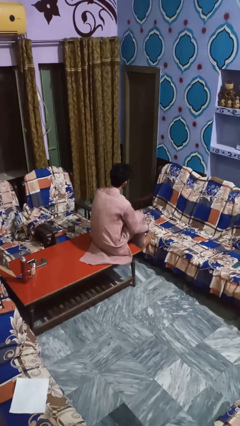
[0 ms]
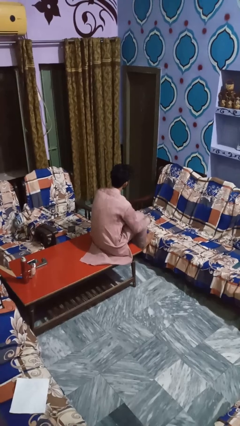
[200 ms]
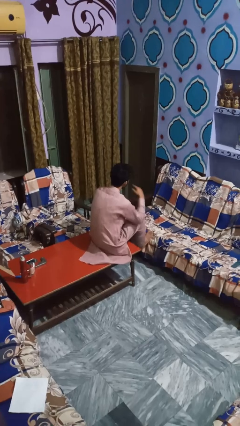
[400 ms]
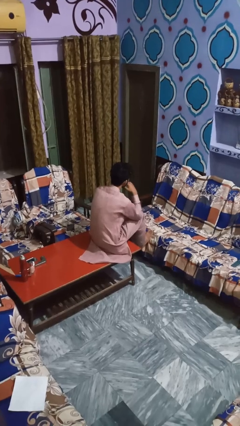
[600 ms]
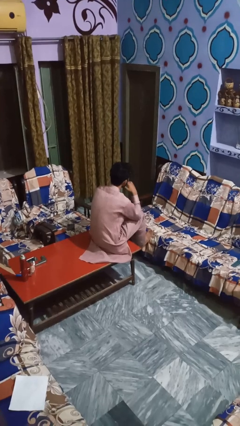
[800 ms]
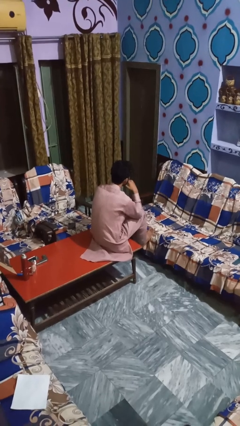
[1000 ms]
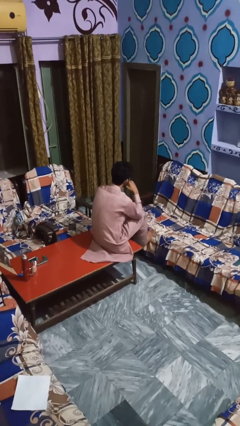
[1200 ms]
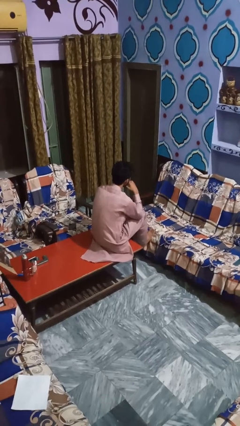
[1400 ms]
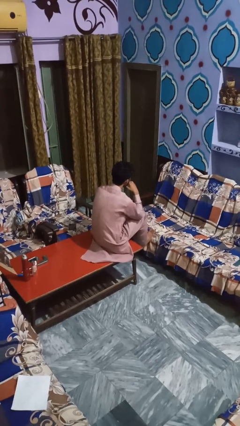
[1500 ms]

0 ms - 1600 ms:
person licks fingers

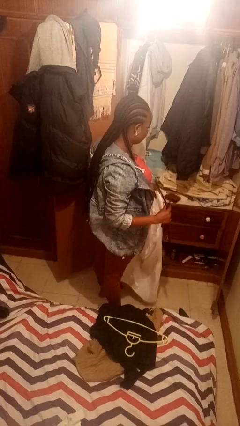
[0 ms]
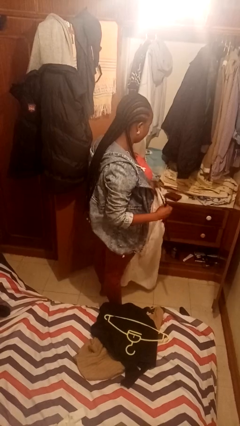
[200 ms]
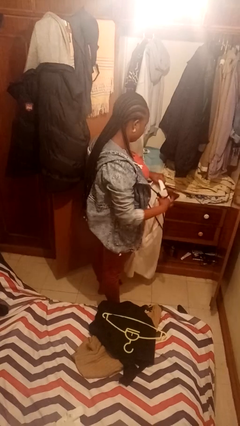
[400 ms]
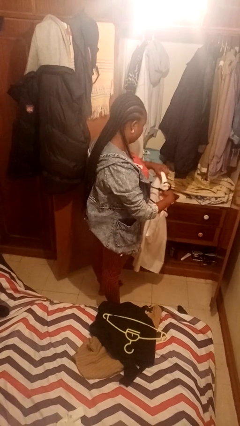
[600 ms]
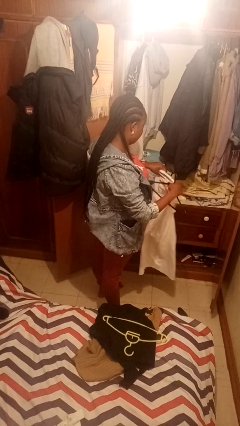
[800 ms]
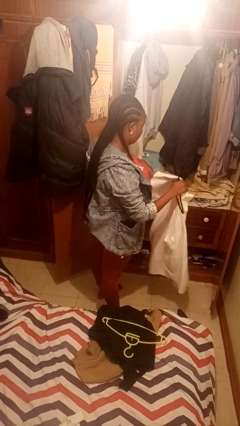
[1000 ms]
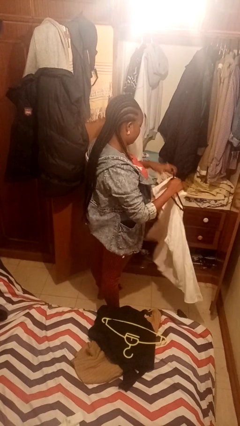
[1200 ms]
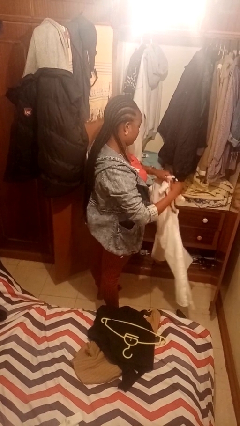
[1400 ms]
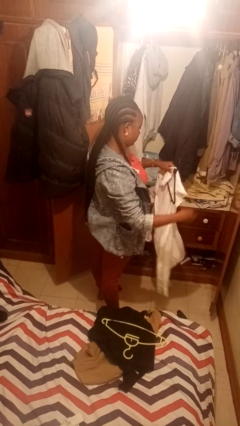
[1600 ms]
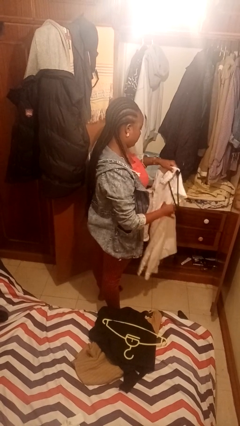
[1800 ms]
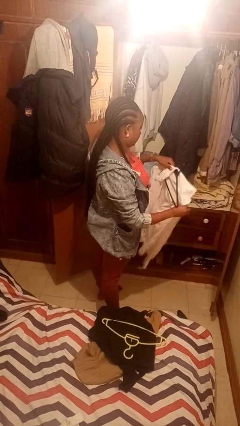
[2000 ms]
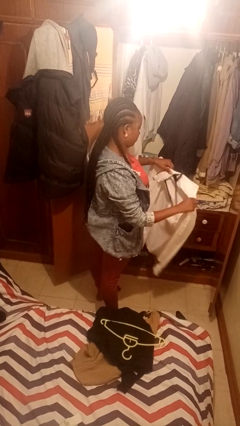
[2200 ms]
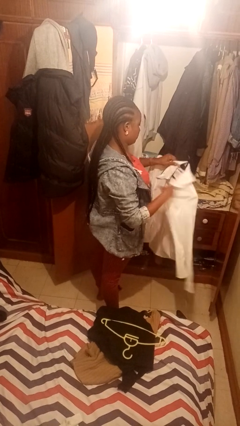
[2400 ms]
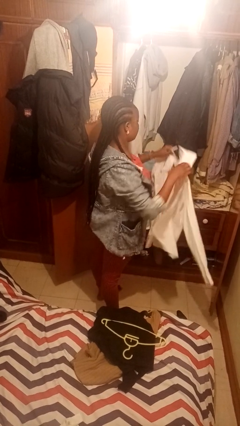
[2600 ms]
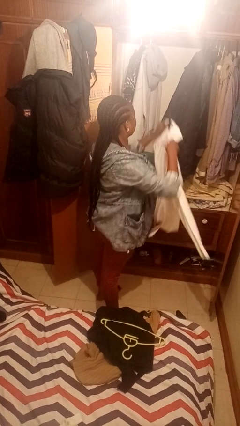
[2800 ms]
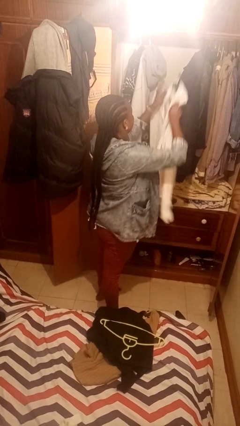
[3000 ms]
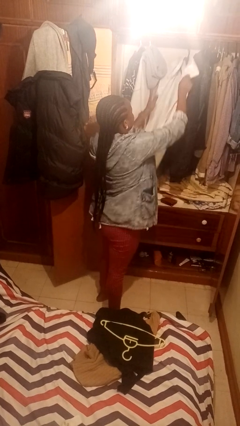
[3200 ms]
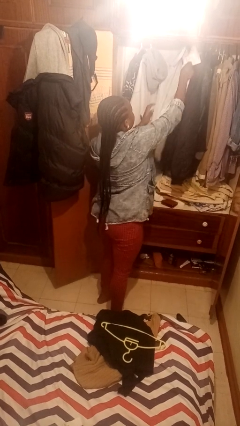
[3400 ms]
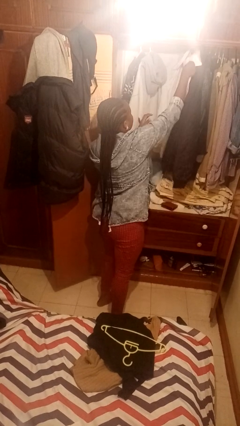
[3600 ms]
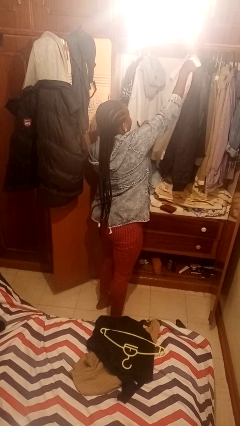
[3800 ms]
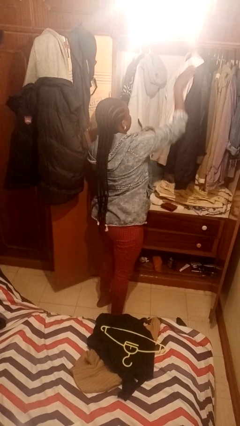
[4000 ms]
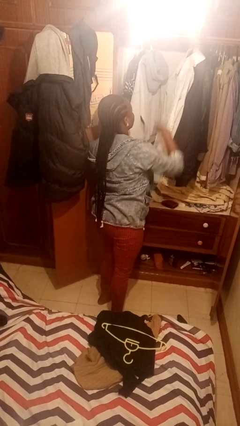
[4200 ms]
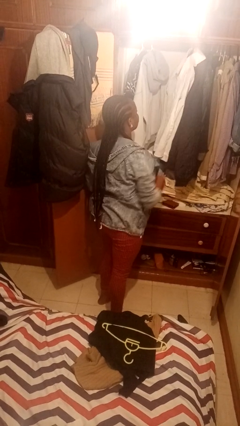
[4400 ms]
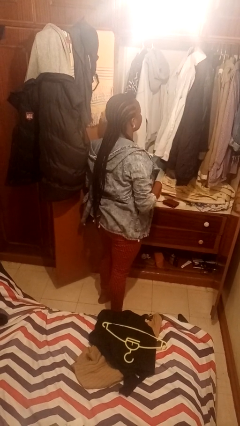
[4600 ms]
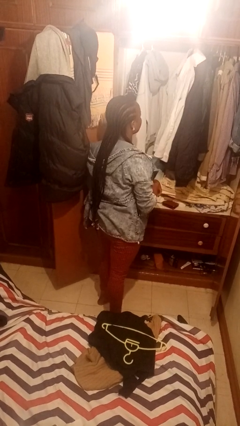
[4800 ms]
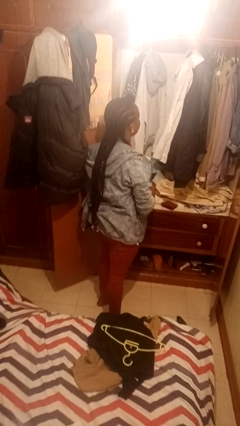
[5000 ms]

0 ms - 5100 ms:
person puts clothes into closet

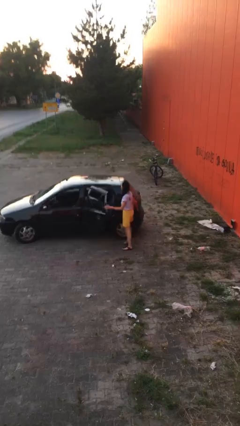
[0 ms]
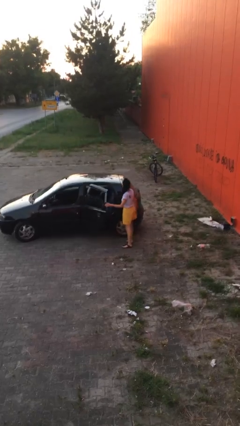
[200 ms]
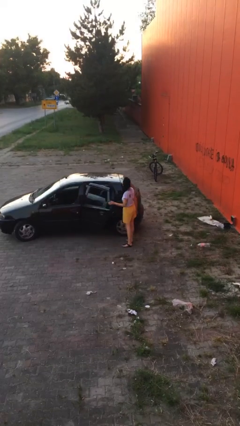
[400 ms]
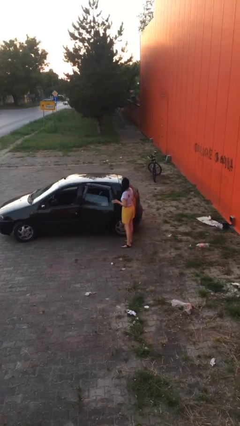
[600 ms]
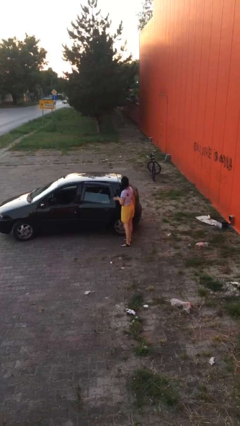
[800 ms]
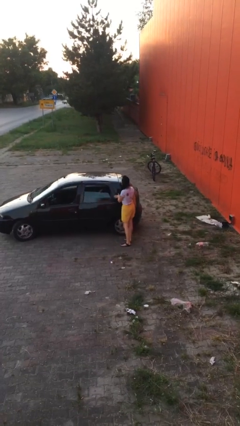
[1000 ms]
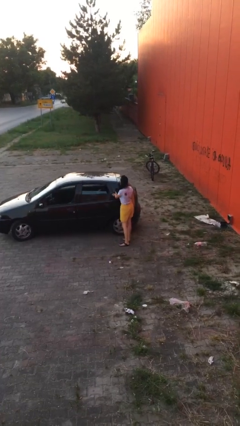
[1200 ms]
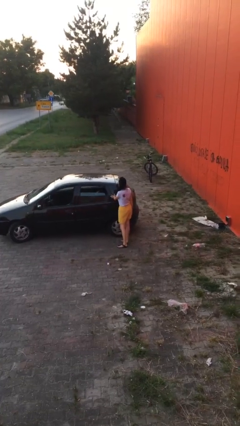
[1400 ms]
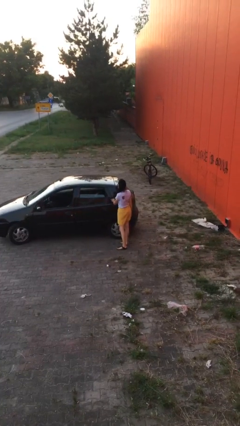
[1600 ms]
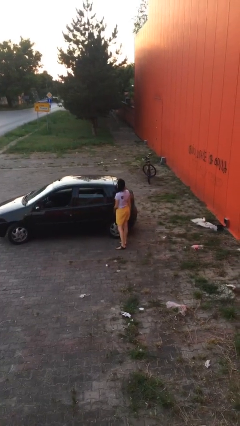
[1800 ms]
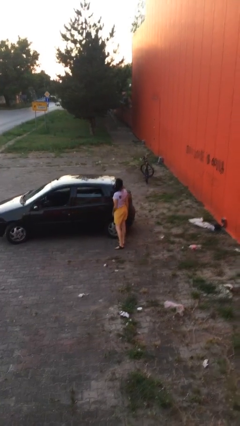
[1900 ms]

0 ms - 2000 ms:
person closes car door

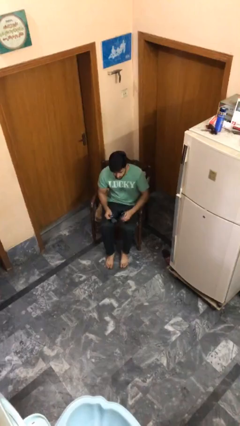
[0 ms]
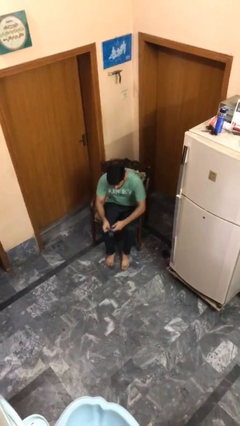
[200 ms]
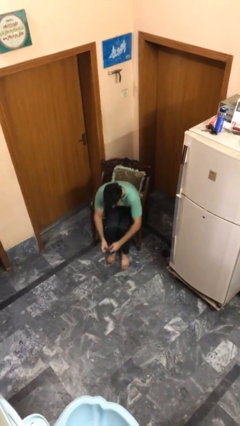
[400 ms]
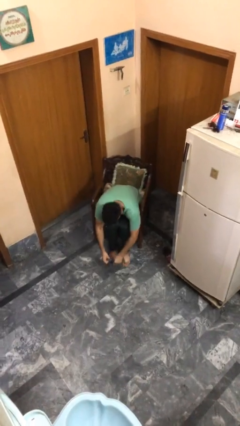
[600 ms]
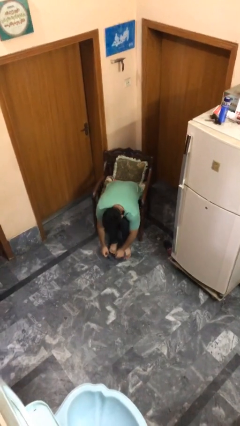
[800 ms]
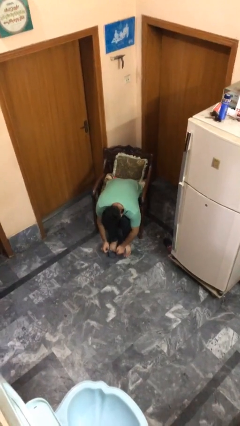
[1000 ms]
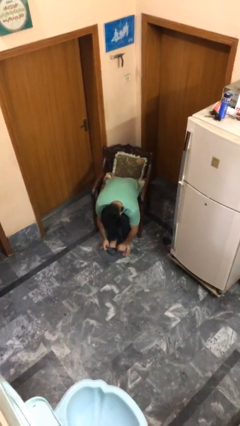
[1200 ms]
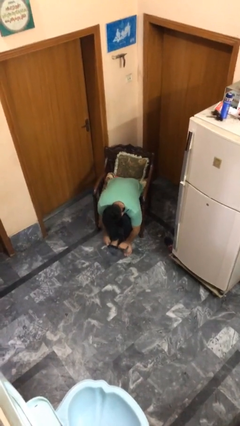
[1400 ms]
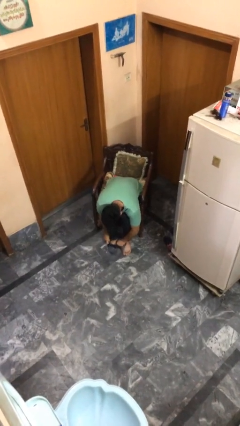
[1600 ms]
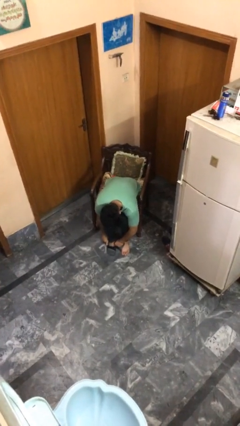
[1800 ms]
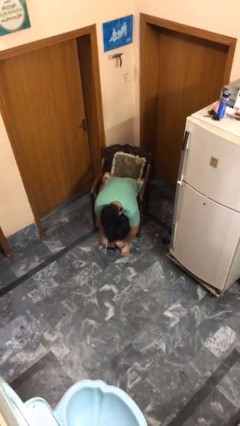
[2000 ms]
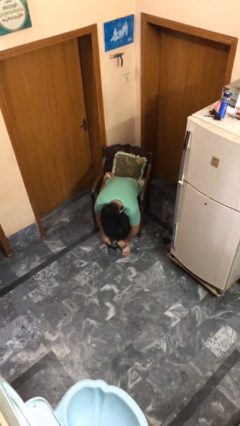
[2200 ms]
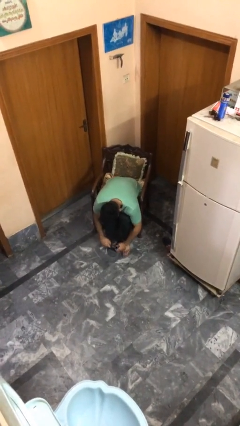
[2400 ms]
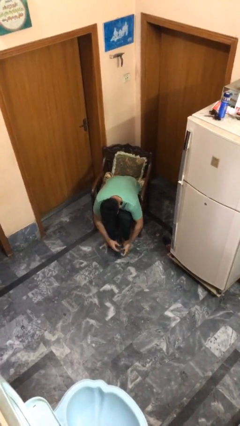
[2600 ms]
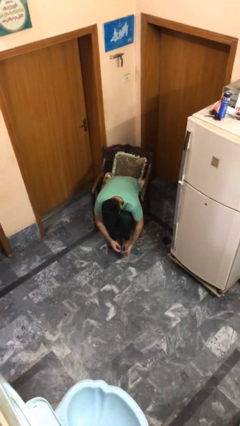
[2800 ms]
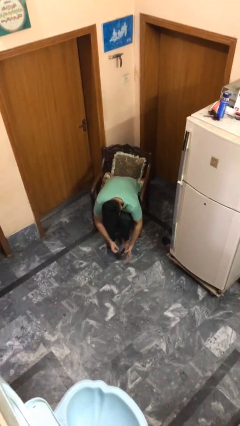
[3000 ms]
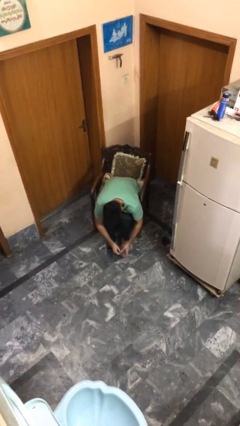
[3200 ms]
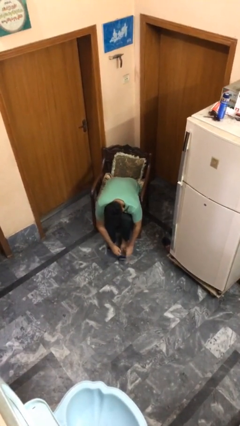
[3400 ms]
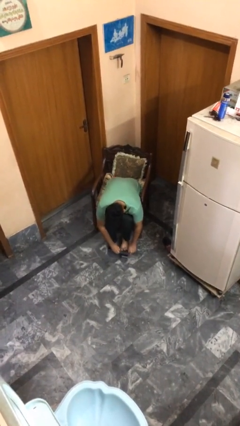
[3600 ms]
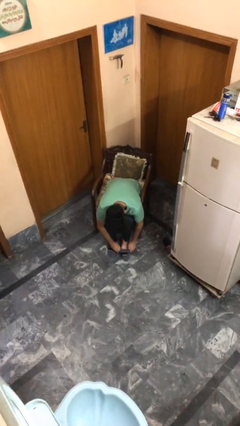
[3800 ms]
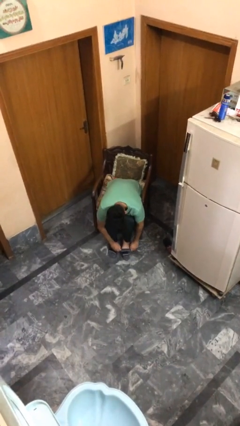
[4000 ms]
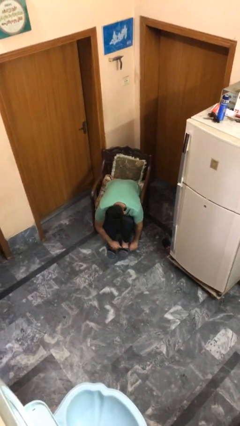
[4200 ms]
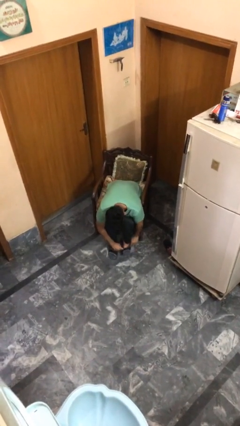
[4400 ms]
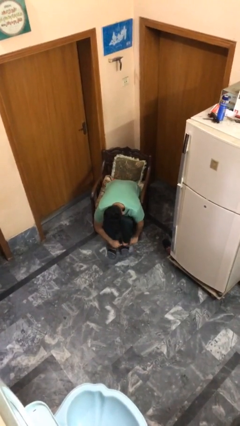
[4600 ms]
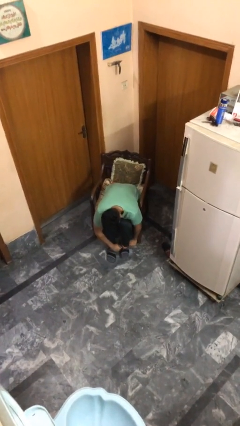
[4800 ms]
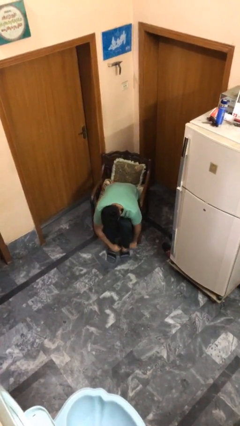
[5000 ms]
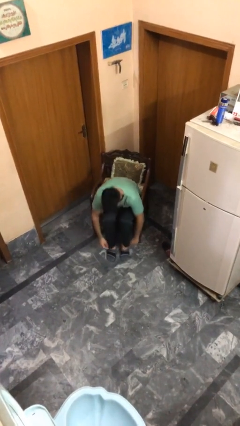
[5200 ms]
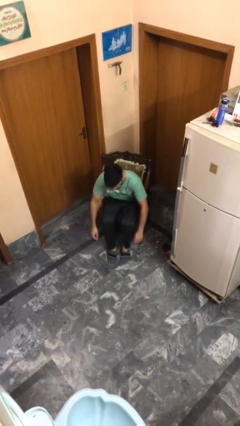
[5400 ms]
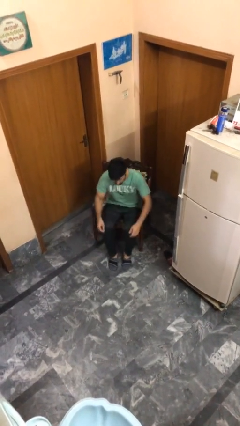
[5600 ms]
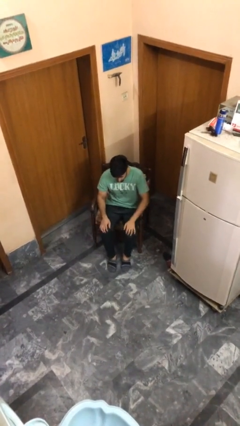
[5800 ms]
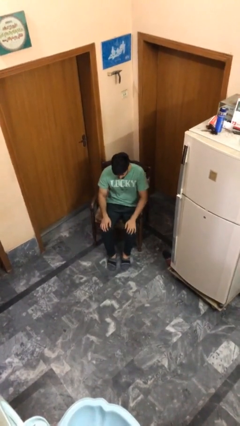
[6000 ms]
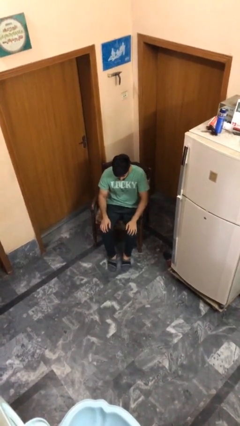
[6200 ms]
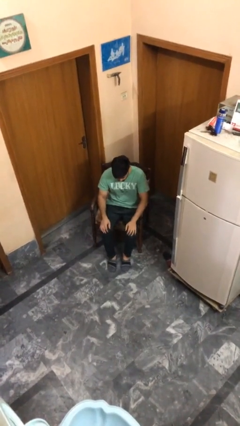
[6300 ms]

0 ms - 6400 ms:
person puts on socks

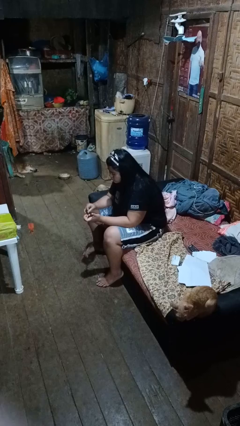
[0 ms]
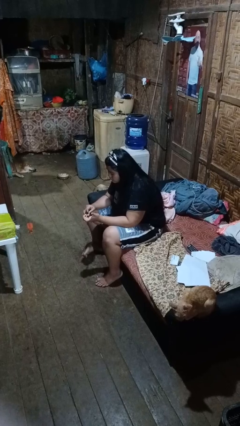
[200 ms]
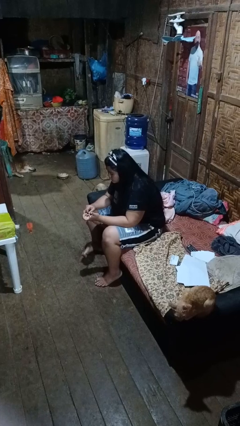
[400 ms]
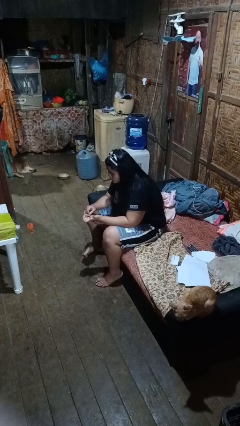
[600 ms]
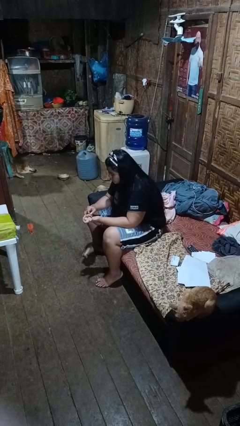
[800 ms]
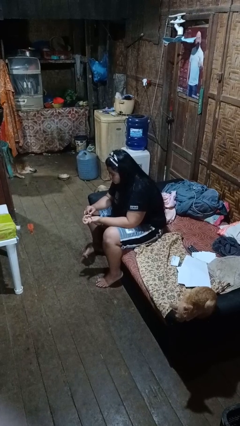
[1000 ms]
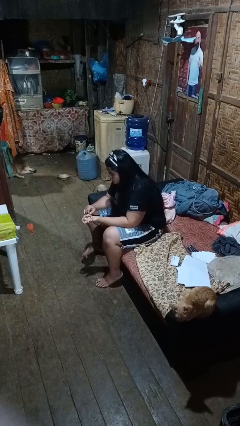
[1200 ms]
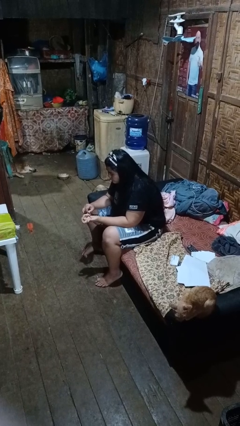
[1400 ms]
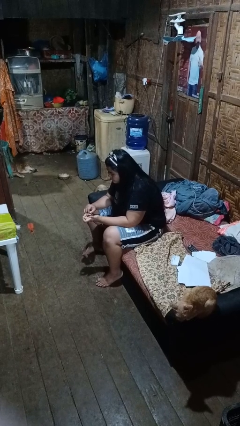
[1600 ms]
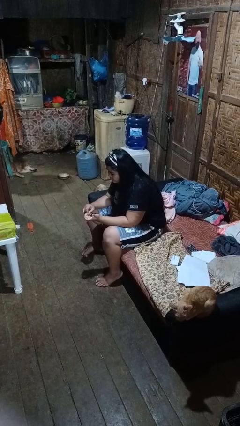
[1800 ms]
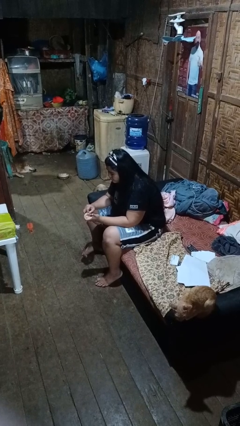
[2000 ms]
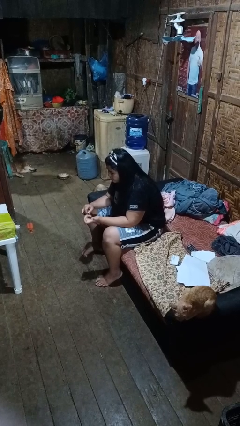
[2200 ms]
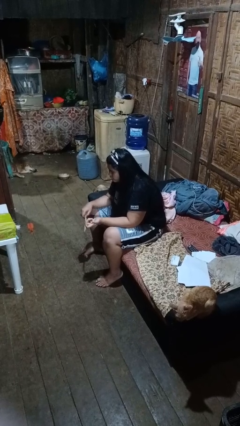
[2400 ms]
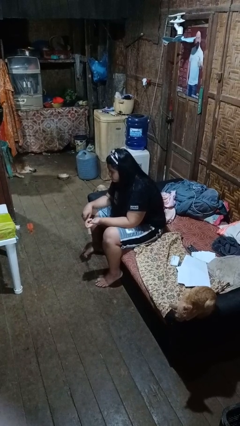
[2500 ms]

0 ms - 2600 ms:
person files fingernails
